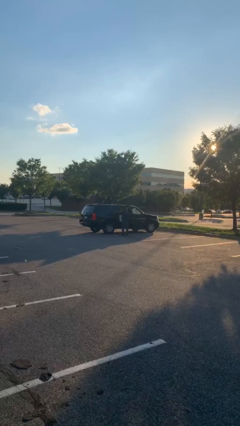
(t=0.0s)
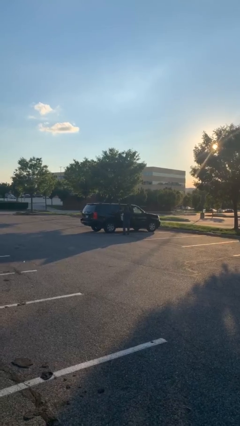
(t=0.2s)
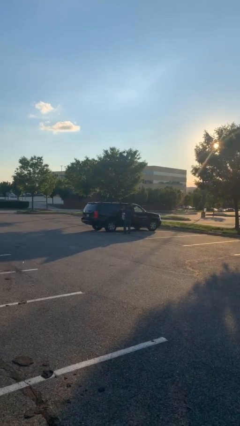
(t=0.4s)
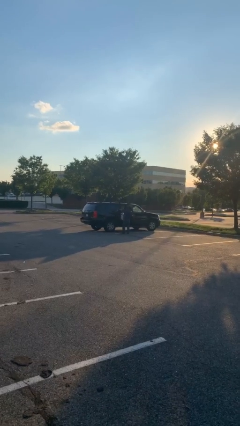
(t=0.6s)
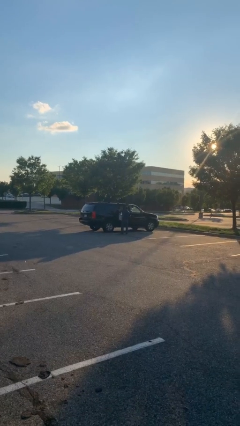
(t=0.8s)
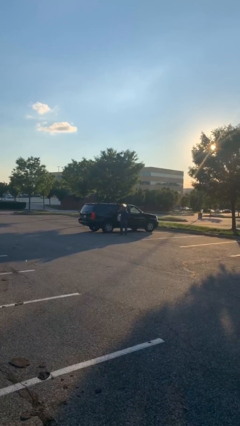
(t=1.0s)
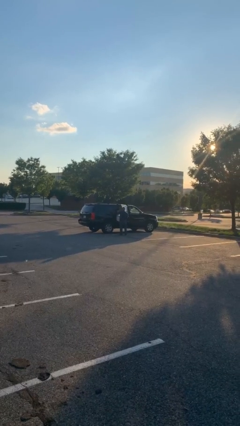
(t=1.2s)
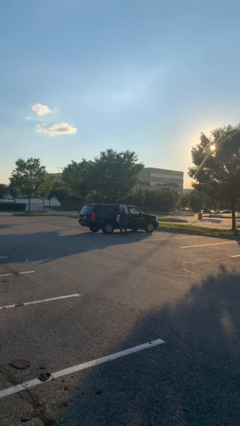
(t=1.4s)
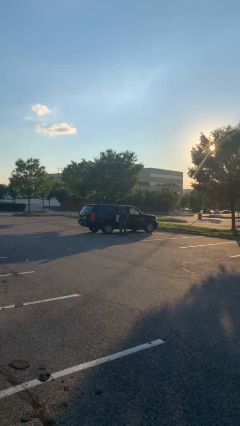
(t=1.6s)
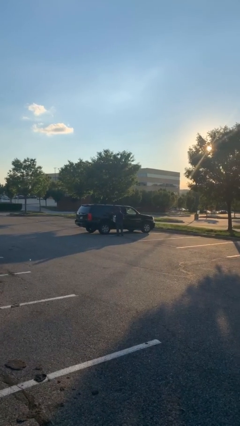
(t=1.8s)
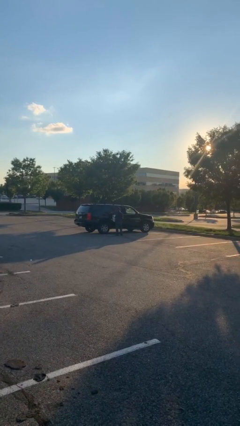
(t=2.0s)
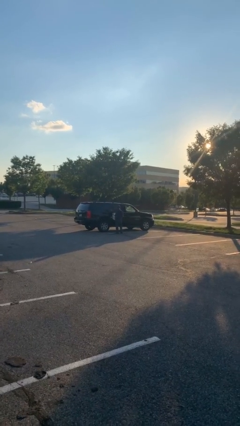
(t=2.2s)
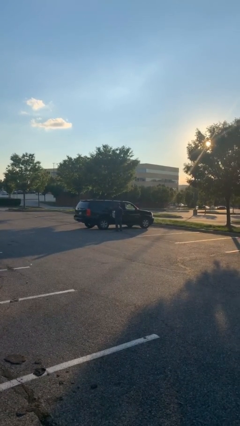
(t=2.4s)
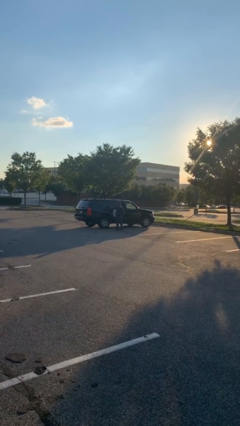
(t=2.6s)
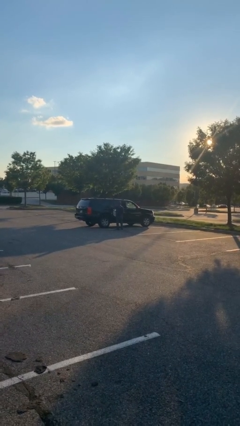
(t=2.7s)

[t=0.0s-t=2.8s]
person closes car door

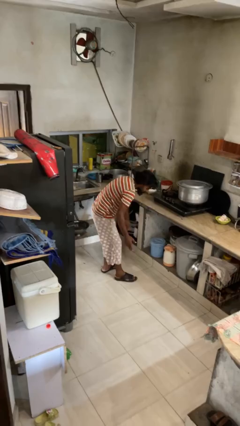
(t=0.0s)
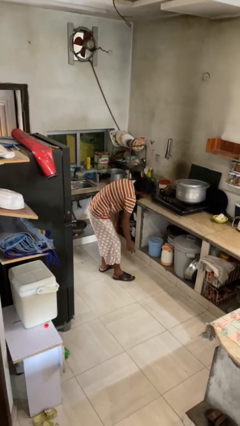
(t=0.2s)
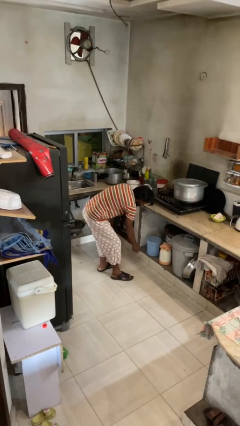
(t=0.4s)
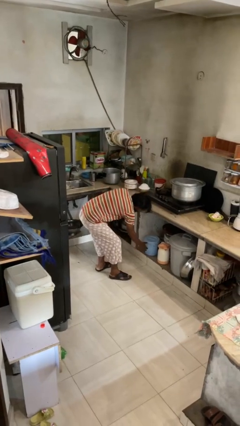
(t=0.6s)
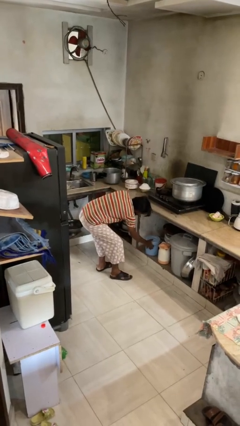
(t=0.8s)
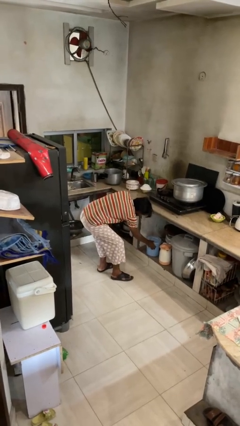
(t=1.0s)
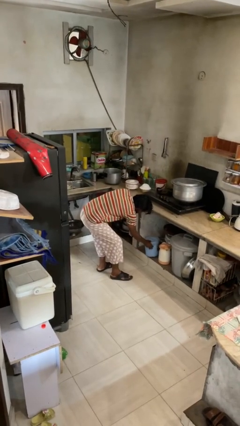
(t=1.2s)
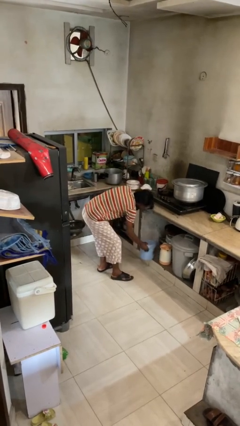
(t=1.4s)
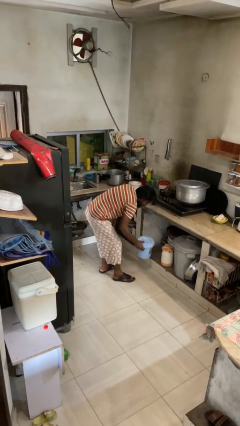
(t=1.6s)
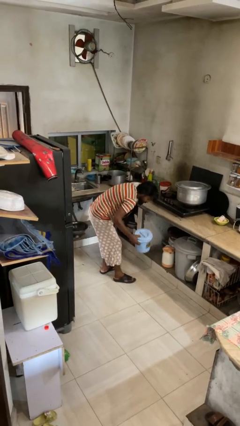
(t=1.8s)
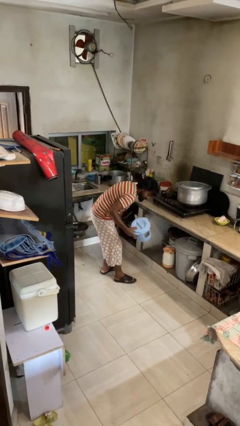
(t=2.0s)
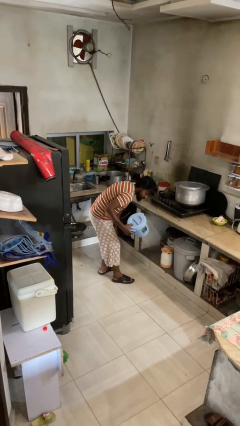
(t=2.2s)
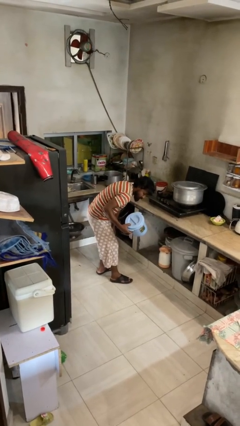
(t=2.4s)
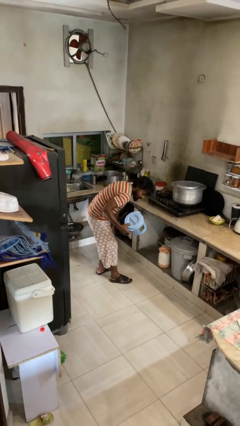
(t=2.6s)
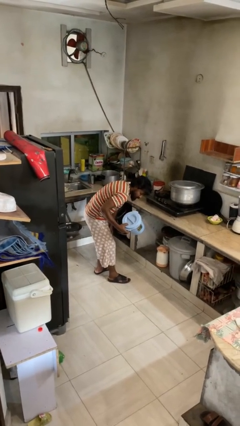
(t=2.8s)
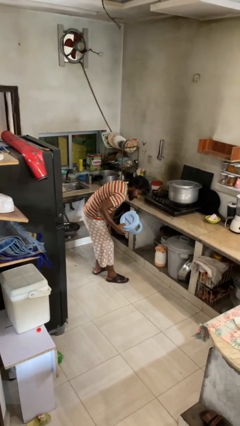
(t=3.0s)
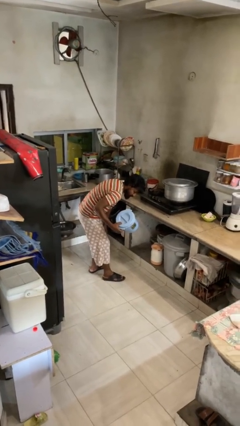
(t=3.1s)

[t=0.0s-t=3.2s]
person picks up object from cabinet

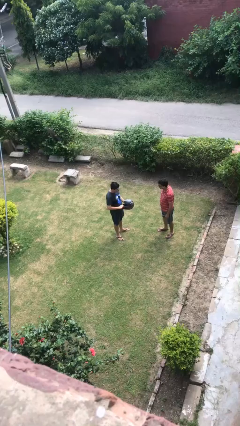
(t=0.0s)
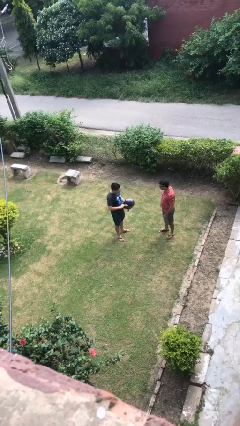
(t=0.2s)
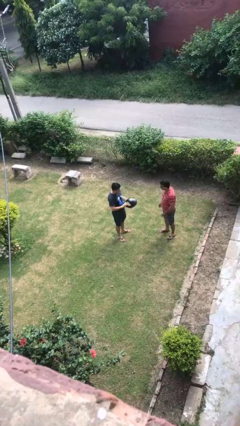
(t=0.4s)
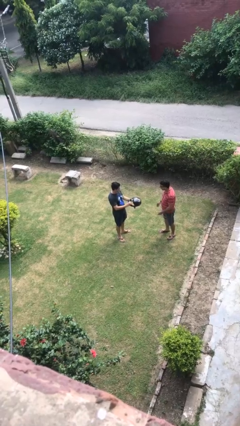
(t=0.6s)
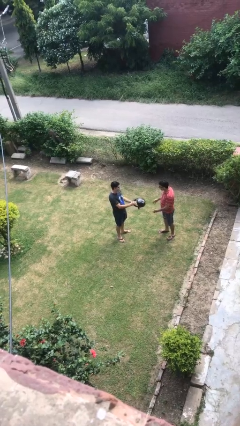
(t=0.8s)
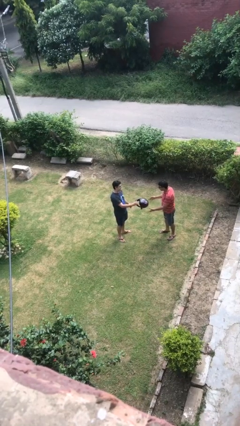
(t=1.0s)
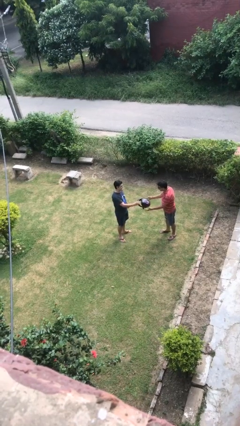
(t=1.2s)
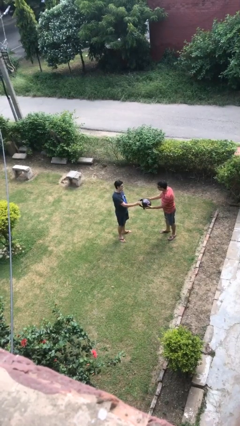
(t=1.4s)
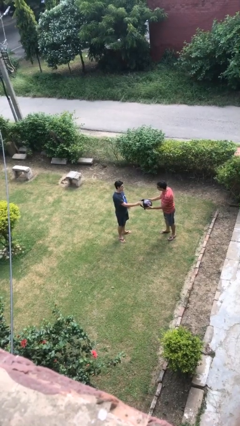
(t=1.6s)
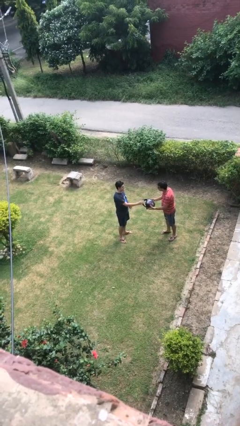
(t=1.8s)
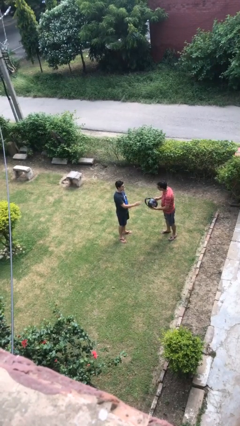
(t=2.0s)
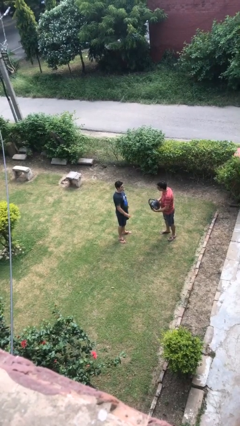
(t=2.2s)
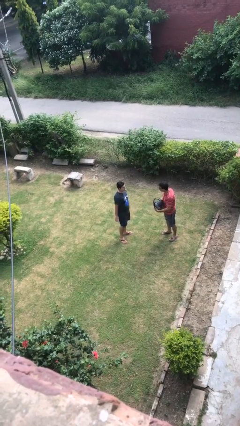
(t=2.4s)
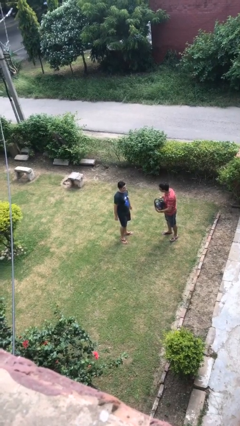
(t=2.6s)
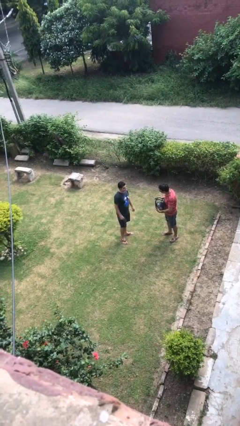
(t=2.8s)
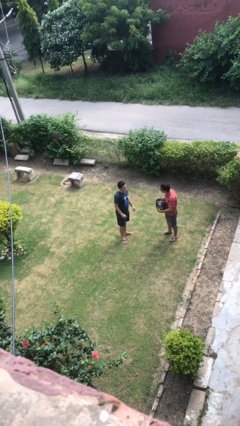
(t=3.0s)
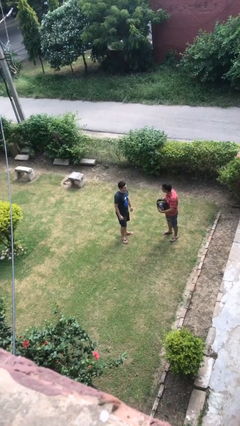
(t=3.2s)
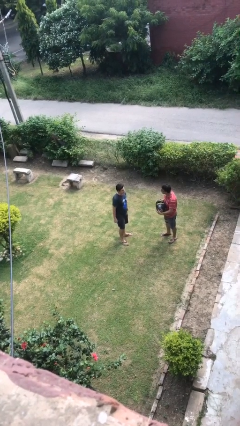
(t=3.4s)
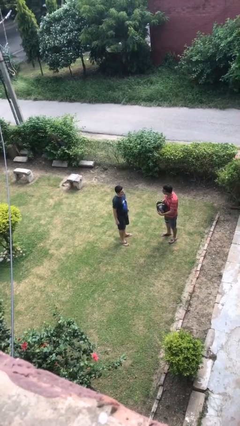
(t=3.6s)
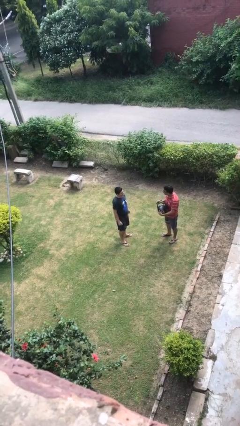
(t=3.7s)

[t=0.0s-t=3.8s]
person transfers object to person

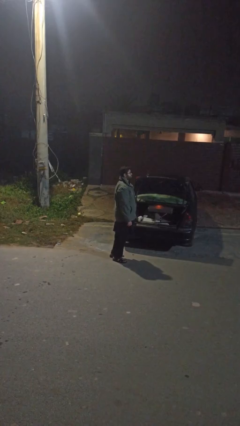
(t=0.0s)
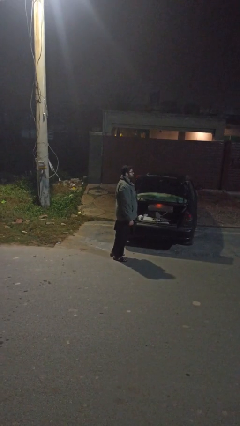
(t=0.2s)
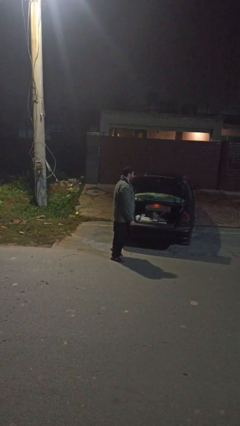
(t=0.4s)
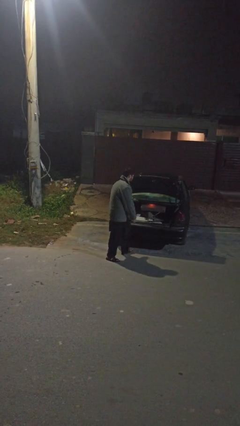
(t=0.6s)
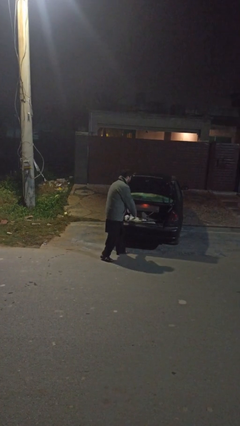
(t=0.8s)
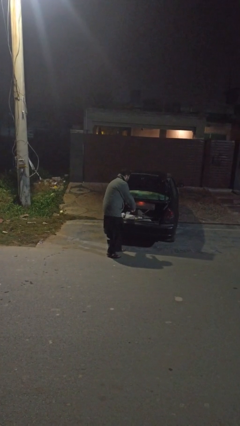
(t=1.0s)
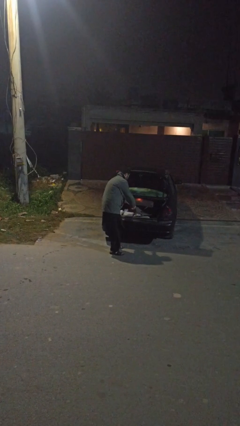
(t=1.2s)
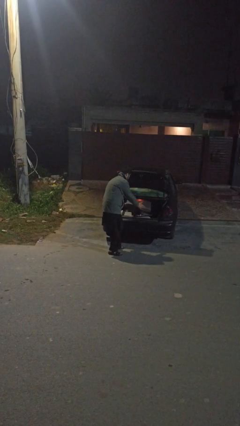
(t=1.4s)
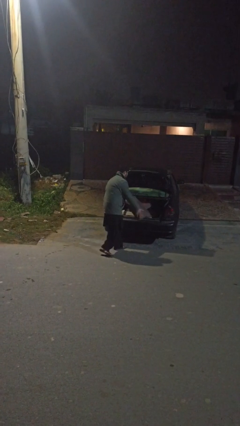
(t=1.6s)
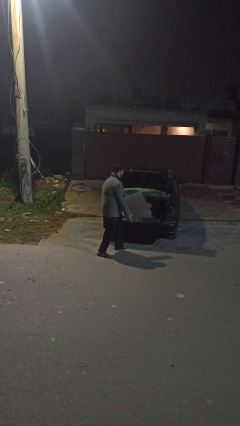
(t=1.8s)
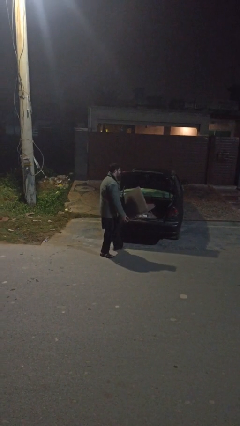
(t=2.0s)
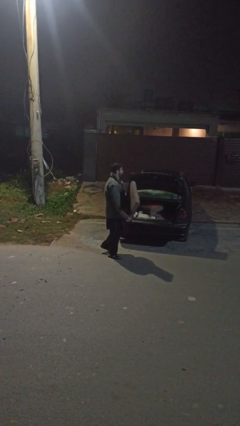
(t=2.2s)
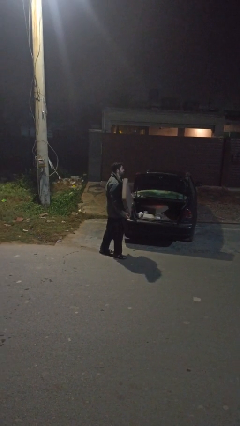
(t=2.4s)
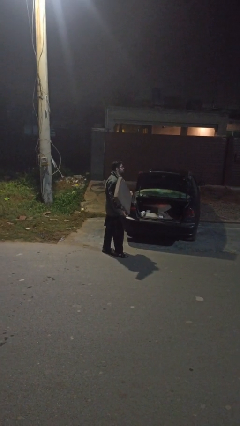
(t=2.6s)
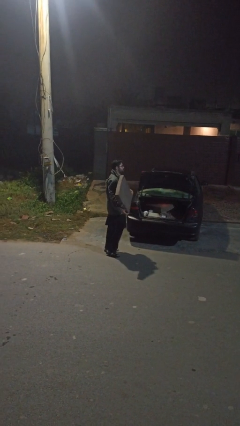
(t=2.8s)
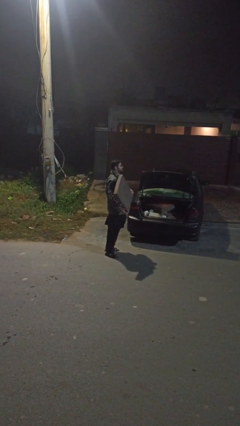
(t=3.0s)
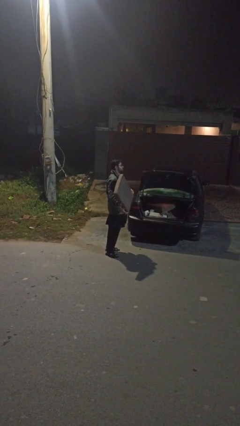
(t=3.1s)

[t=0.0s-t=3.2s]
person unloads car

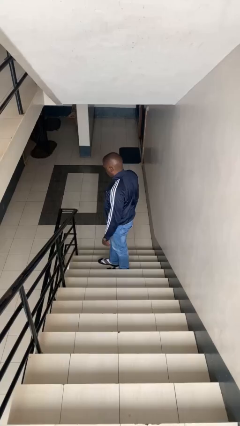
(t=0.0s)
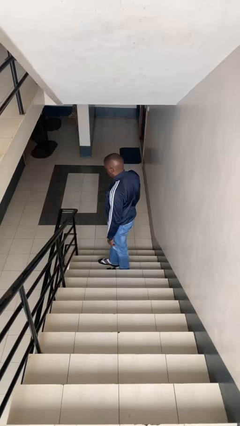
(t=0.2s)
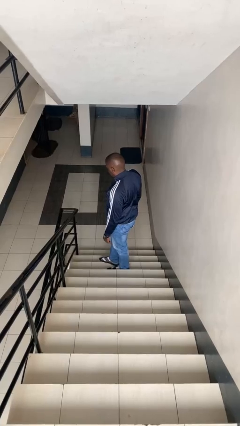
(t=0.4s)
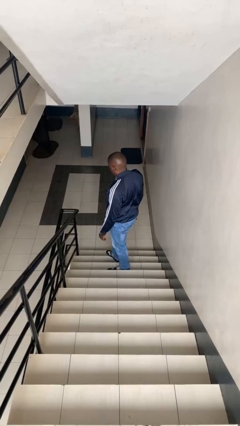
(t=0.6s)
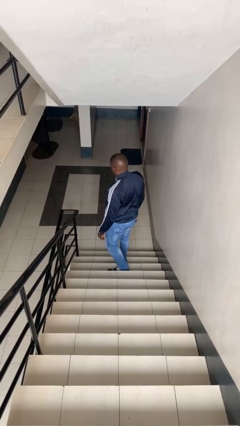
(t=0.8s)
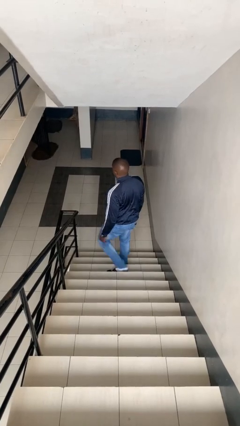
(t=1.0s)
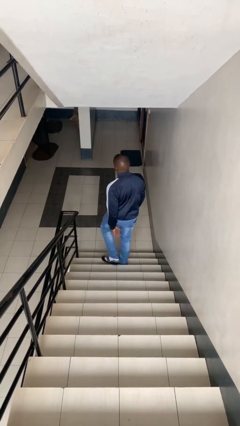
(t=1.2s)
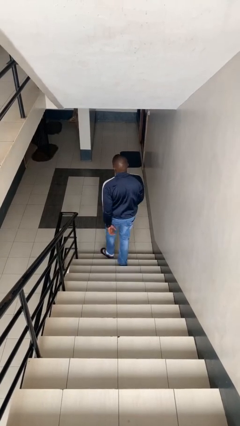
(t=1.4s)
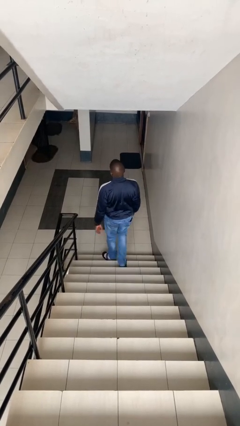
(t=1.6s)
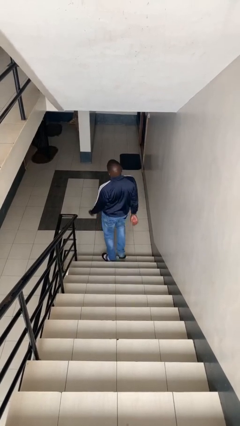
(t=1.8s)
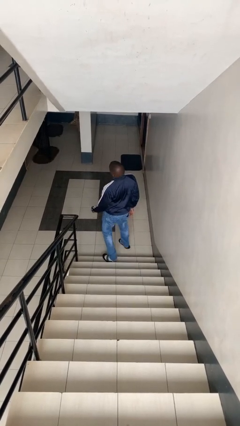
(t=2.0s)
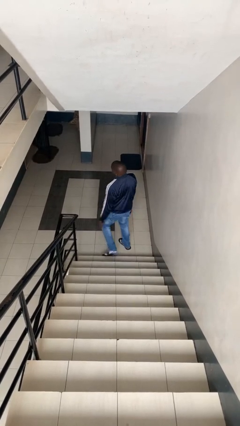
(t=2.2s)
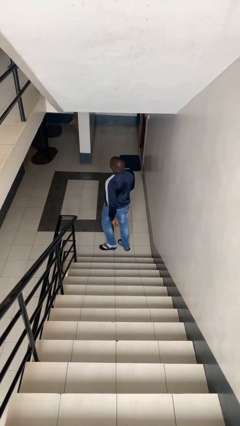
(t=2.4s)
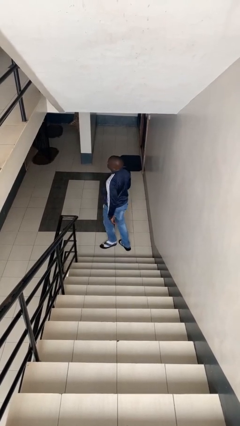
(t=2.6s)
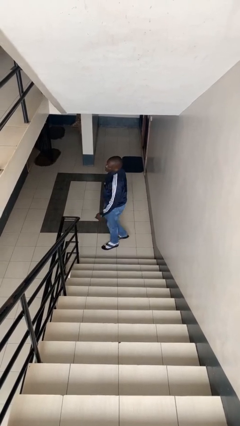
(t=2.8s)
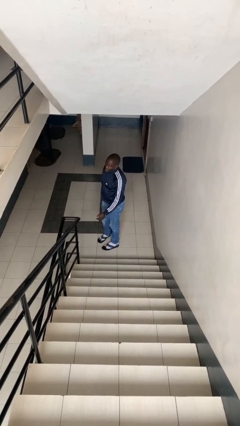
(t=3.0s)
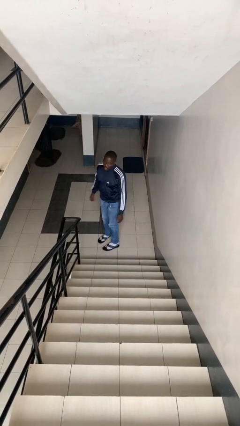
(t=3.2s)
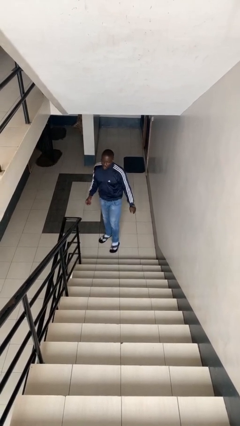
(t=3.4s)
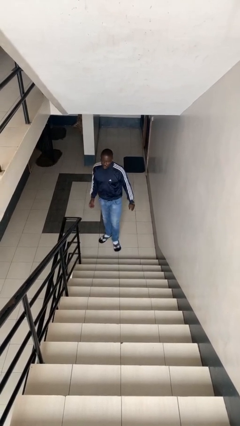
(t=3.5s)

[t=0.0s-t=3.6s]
person climbs down stairs

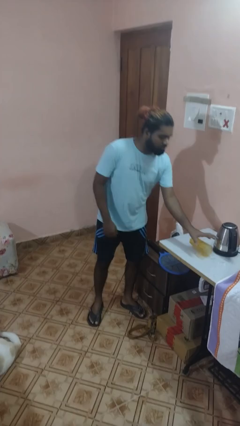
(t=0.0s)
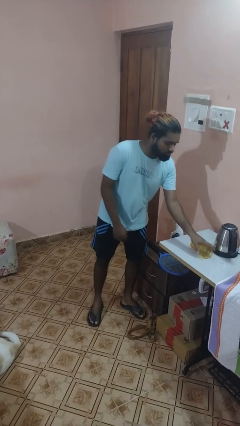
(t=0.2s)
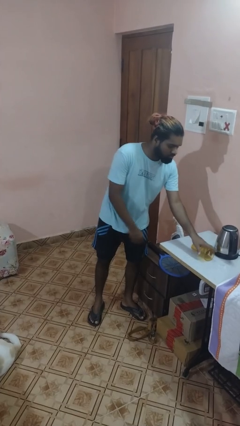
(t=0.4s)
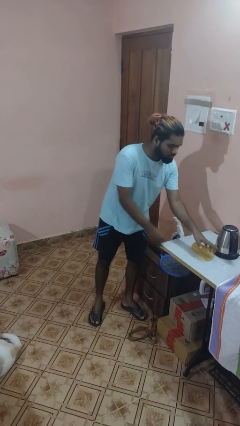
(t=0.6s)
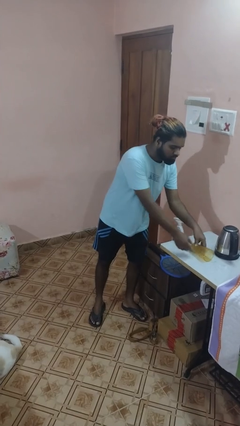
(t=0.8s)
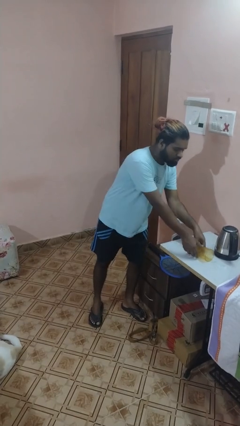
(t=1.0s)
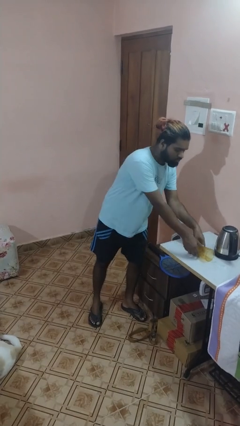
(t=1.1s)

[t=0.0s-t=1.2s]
person knocks over glass
